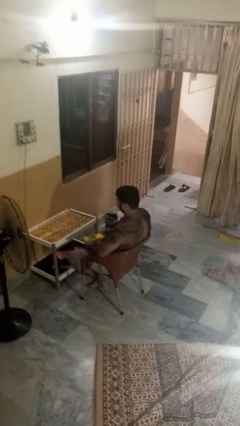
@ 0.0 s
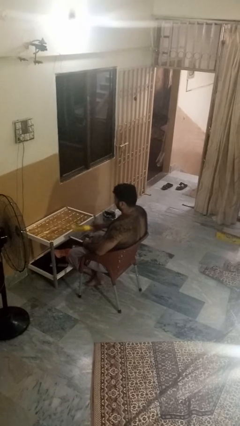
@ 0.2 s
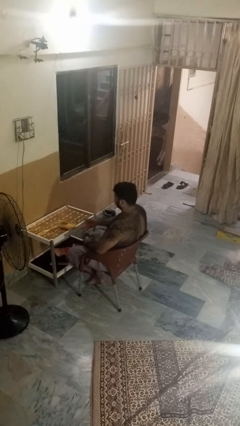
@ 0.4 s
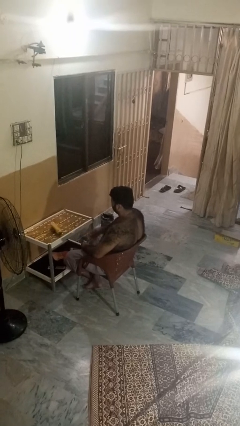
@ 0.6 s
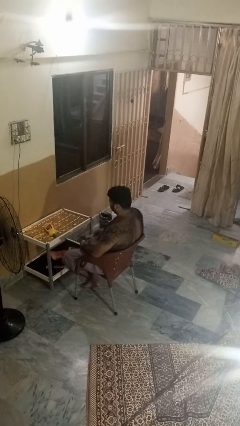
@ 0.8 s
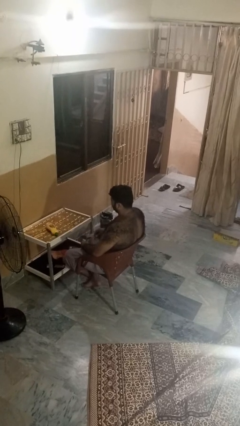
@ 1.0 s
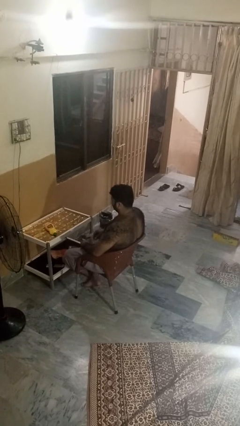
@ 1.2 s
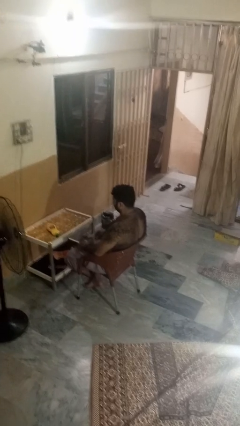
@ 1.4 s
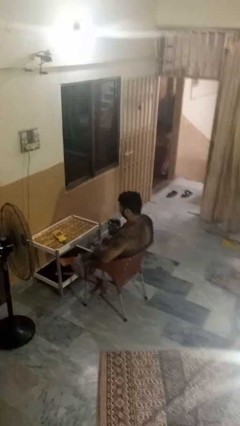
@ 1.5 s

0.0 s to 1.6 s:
person throws object on table

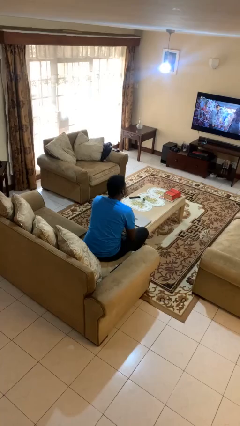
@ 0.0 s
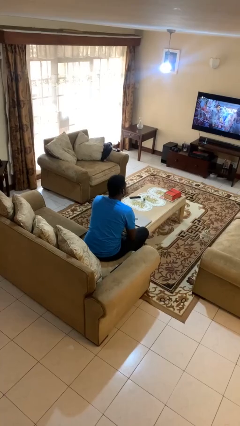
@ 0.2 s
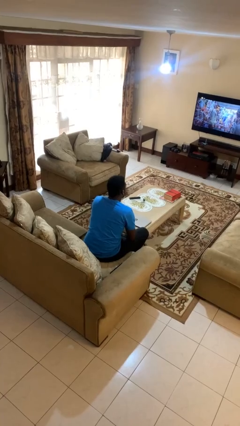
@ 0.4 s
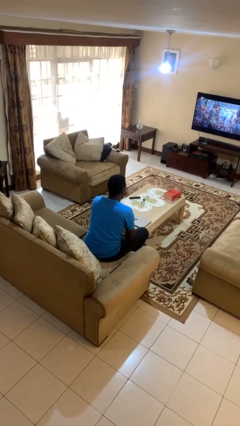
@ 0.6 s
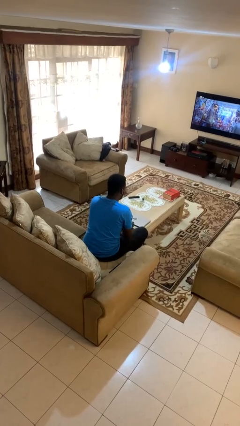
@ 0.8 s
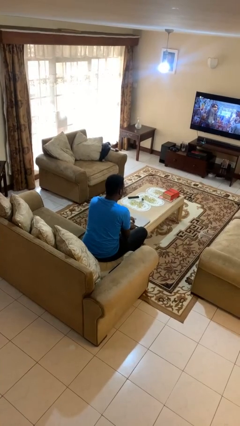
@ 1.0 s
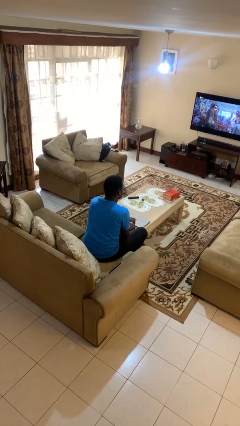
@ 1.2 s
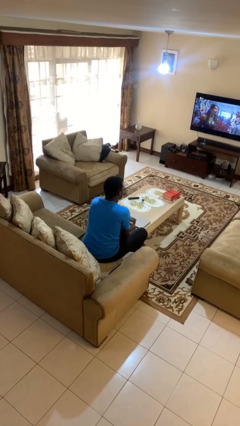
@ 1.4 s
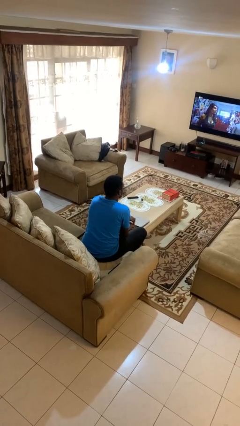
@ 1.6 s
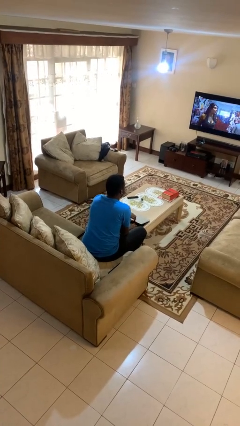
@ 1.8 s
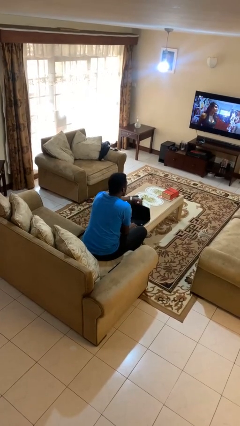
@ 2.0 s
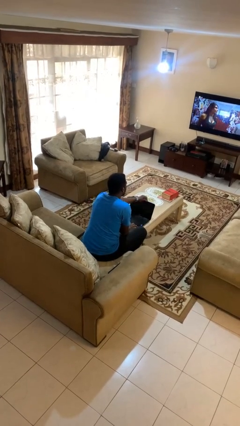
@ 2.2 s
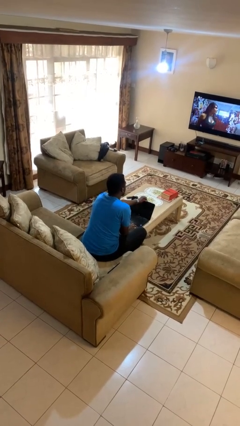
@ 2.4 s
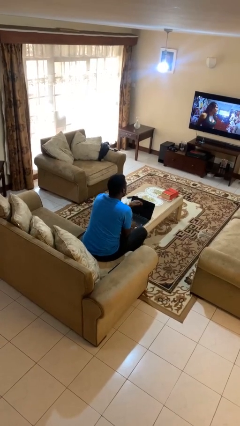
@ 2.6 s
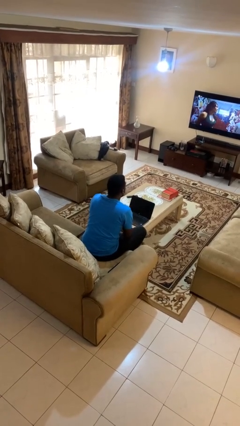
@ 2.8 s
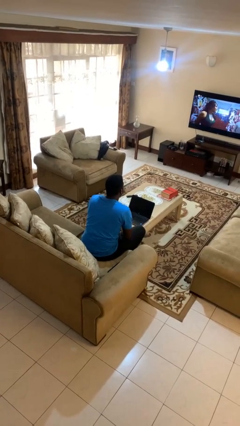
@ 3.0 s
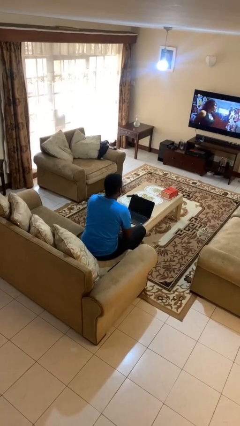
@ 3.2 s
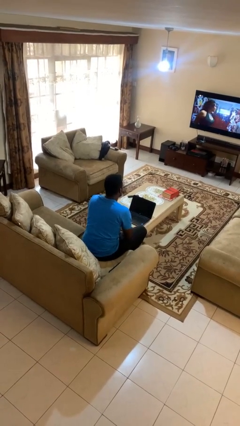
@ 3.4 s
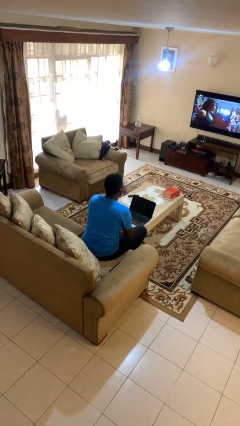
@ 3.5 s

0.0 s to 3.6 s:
person opens laptop

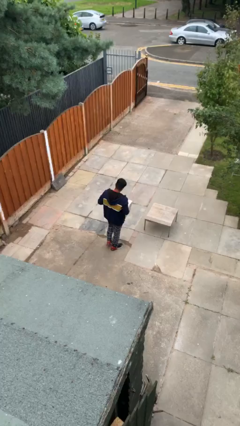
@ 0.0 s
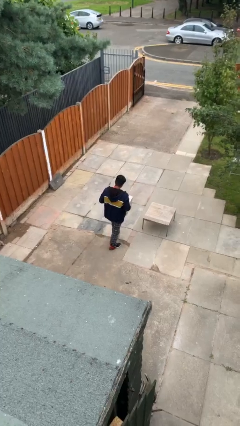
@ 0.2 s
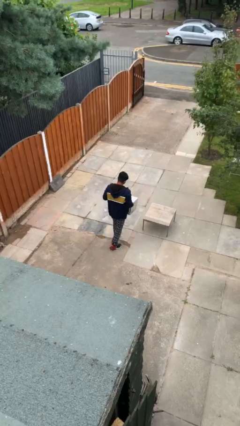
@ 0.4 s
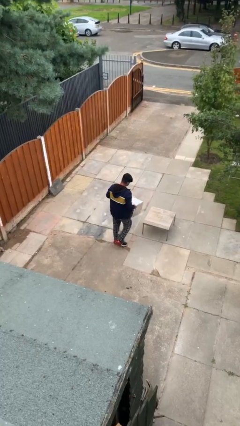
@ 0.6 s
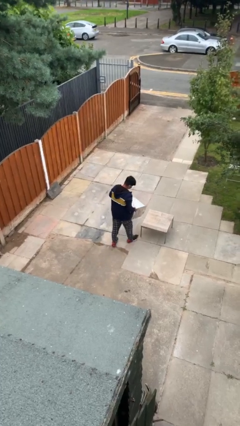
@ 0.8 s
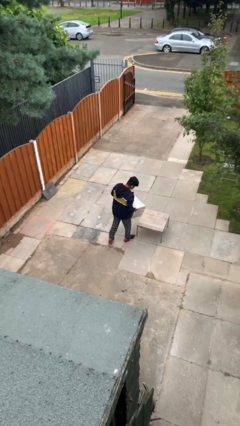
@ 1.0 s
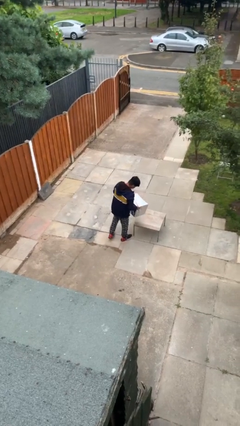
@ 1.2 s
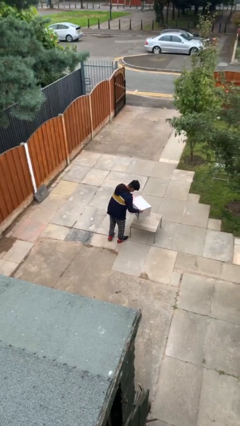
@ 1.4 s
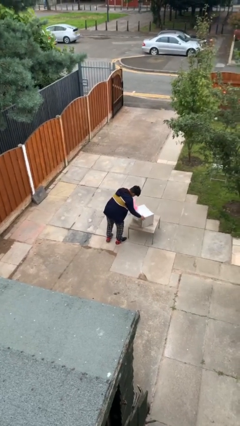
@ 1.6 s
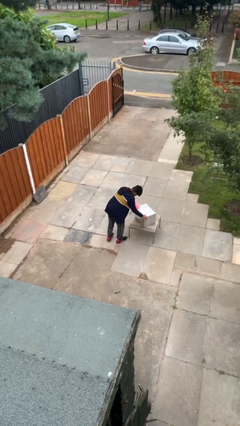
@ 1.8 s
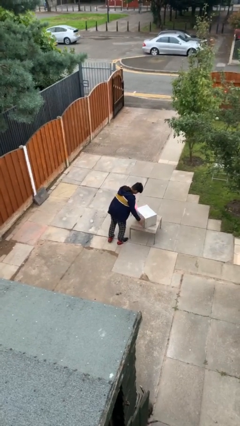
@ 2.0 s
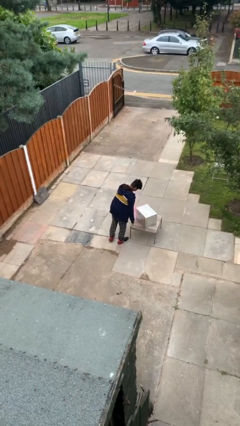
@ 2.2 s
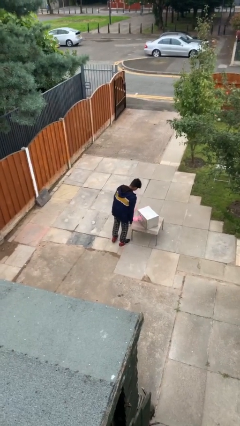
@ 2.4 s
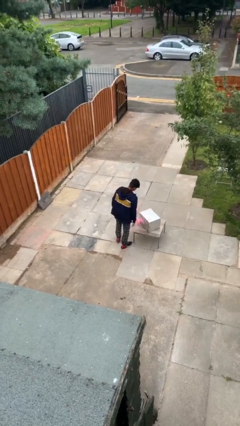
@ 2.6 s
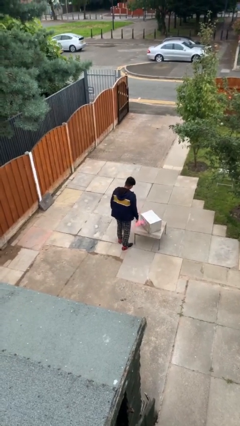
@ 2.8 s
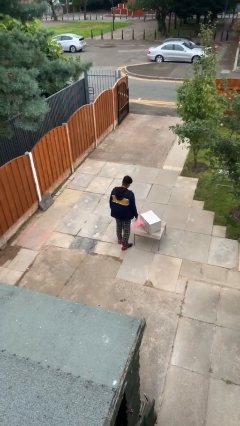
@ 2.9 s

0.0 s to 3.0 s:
person puts down object on table

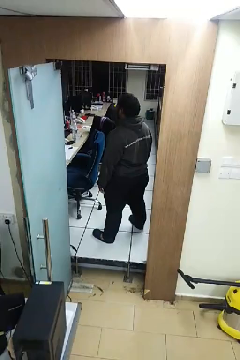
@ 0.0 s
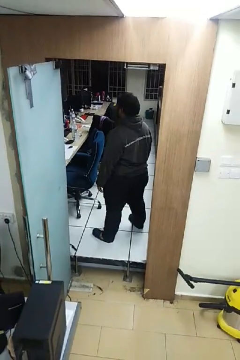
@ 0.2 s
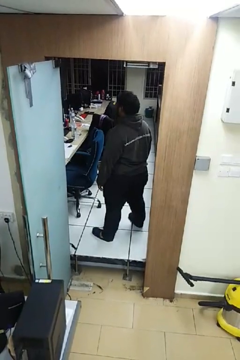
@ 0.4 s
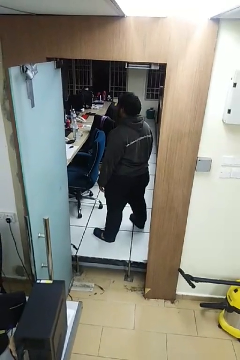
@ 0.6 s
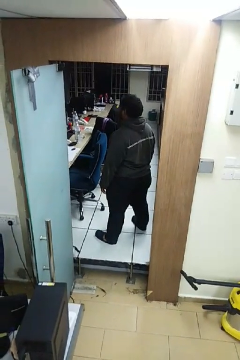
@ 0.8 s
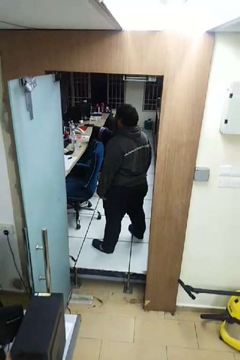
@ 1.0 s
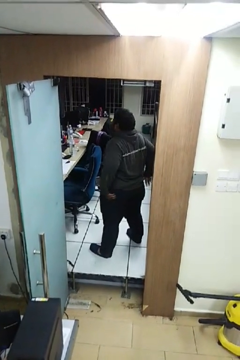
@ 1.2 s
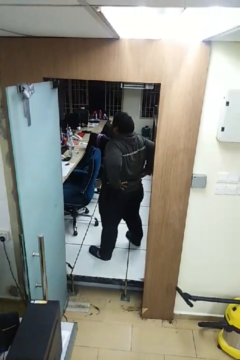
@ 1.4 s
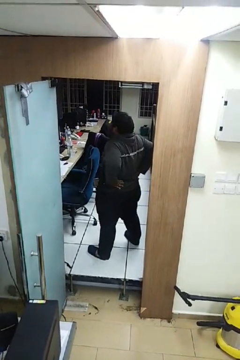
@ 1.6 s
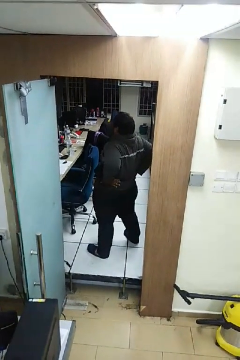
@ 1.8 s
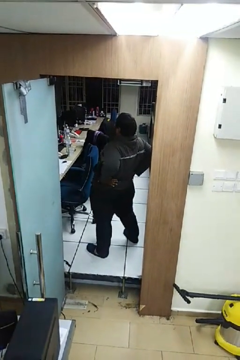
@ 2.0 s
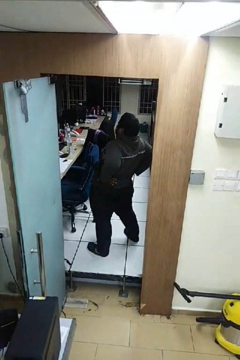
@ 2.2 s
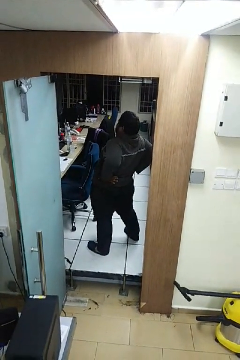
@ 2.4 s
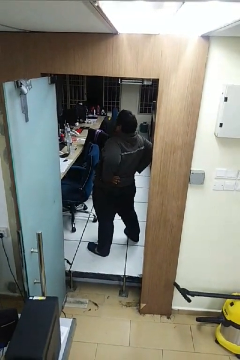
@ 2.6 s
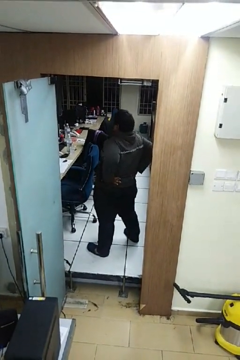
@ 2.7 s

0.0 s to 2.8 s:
person stretches back

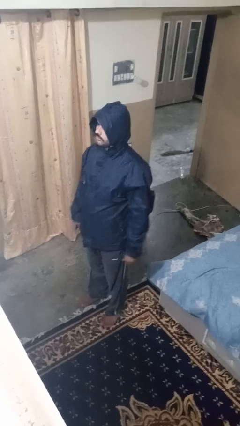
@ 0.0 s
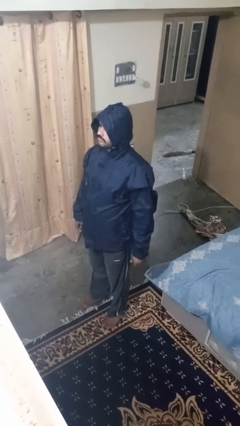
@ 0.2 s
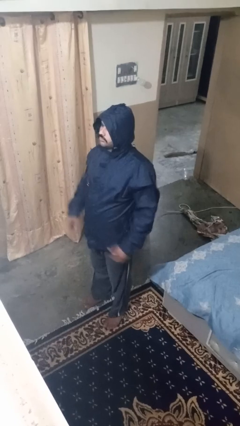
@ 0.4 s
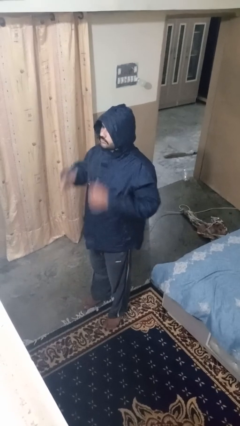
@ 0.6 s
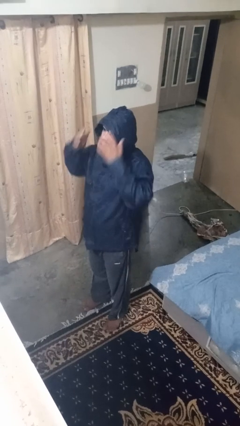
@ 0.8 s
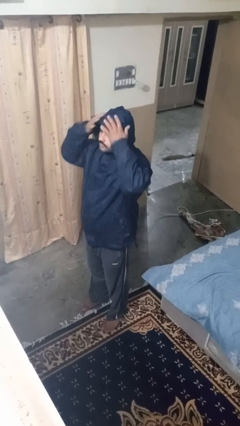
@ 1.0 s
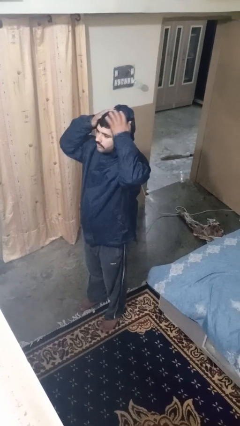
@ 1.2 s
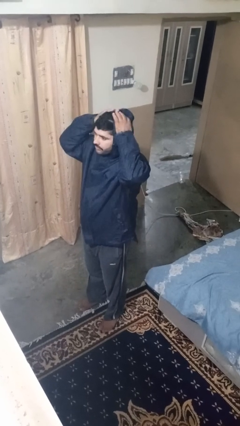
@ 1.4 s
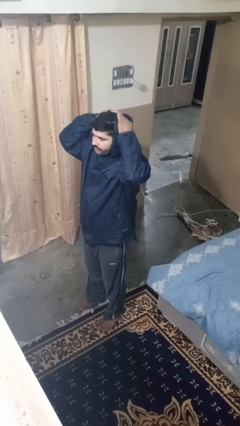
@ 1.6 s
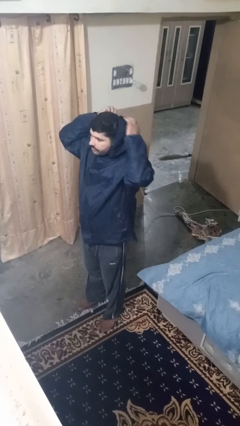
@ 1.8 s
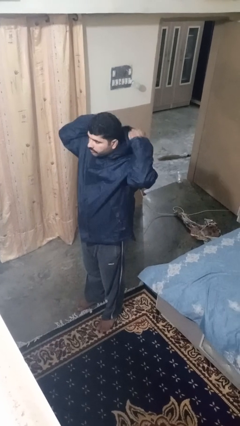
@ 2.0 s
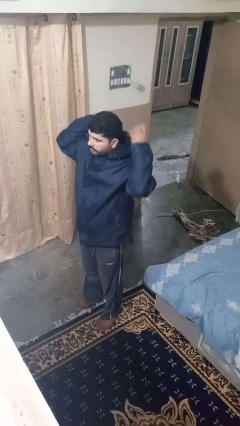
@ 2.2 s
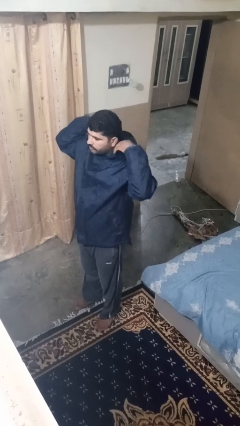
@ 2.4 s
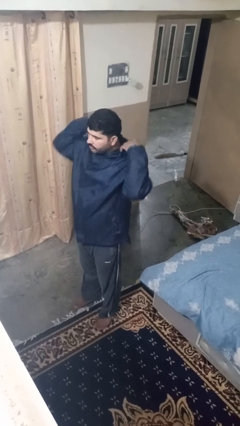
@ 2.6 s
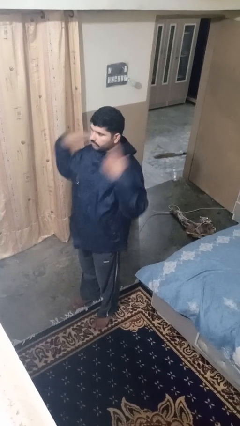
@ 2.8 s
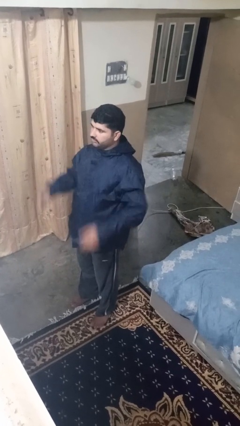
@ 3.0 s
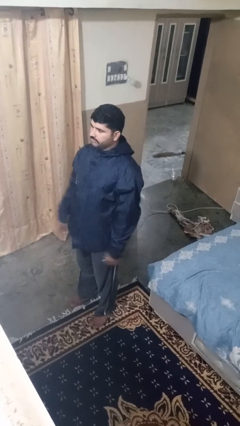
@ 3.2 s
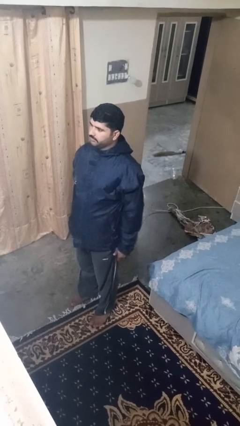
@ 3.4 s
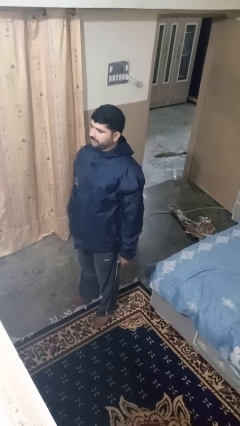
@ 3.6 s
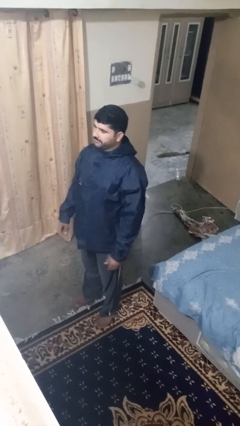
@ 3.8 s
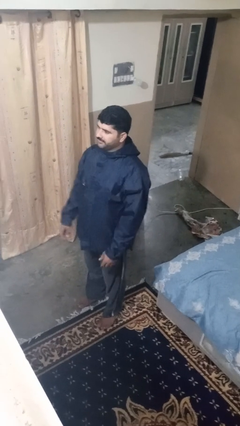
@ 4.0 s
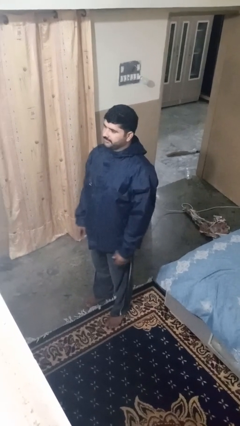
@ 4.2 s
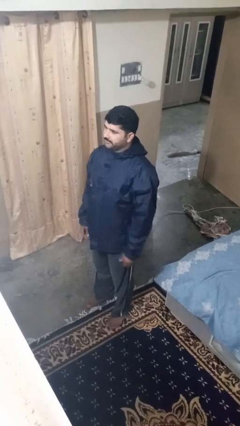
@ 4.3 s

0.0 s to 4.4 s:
person takes off hoodie

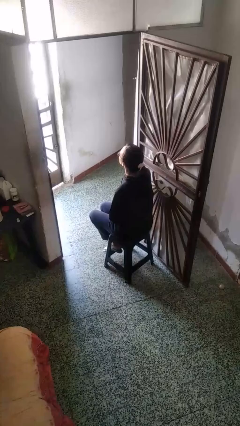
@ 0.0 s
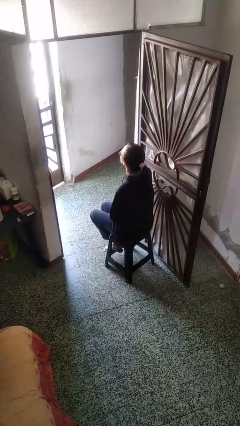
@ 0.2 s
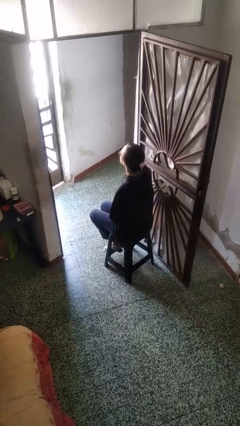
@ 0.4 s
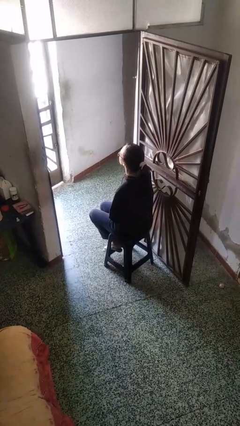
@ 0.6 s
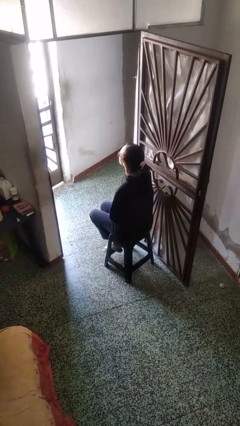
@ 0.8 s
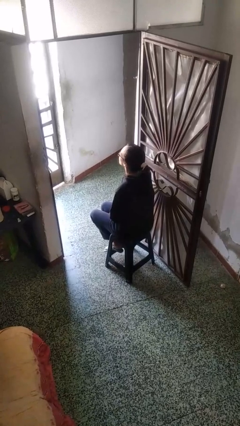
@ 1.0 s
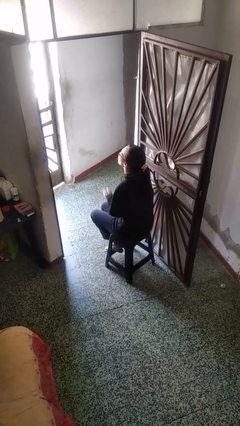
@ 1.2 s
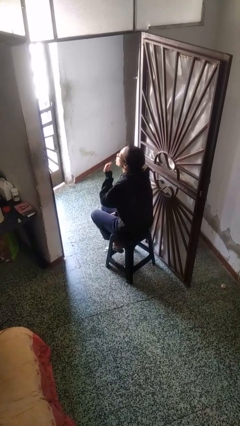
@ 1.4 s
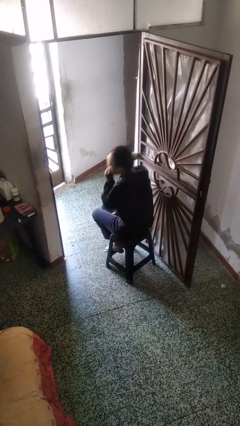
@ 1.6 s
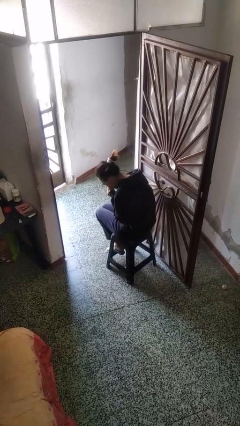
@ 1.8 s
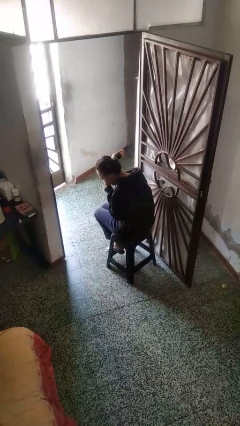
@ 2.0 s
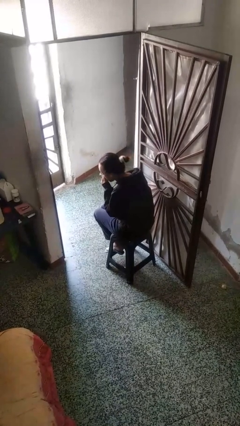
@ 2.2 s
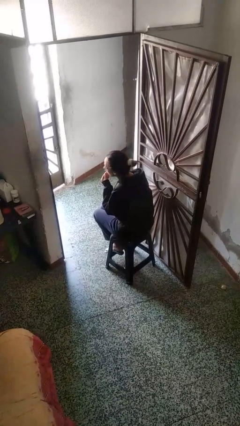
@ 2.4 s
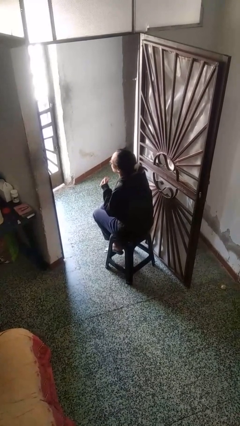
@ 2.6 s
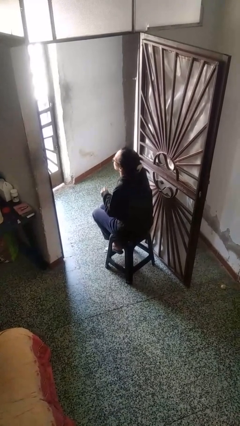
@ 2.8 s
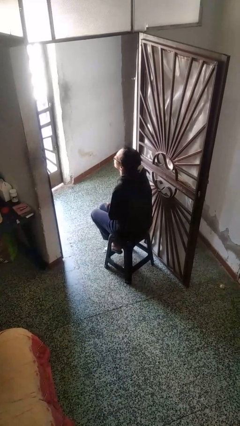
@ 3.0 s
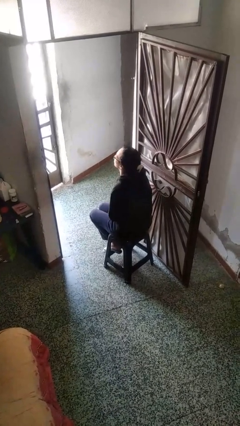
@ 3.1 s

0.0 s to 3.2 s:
person sneezes into hand
